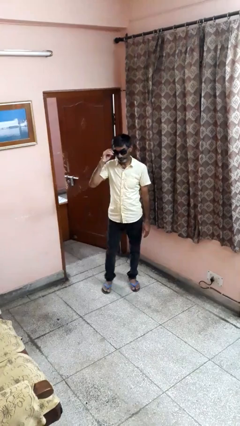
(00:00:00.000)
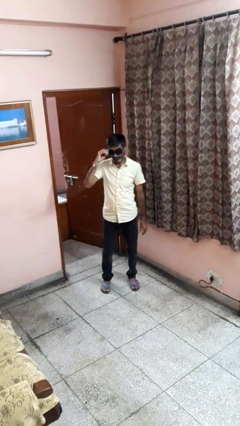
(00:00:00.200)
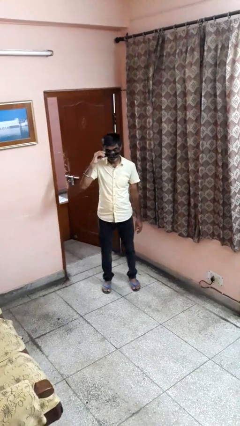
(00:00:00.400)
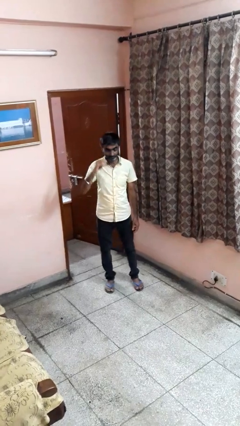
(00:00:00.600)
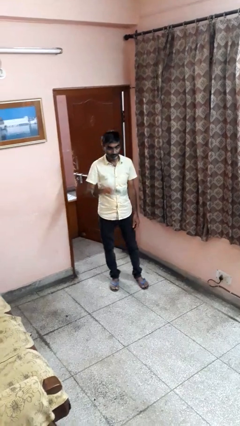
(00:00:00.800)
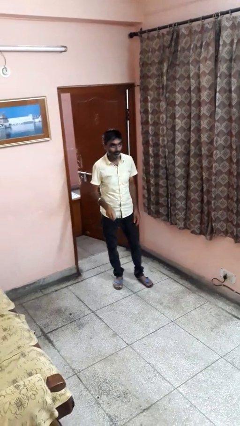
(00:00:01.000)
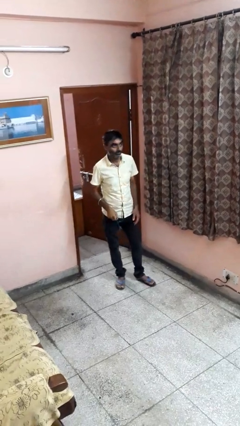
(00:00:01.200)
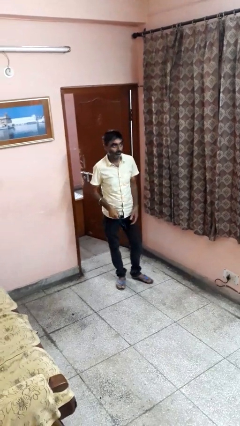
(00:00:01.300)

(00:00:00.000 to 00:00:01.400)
person takes off sunglasses

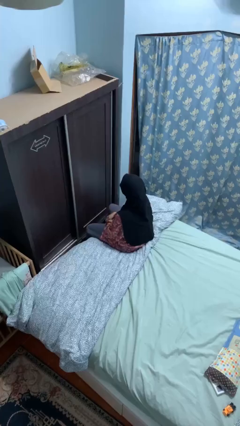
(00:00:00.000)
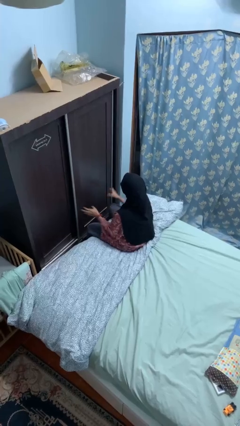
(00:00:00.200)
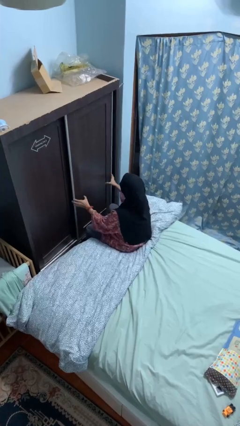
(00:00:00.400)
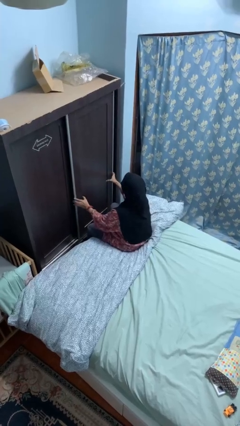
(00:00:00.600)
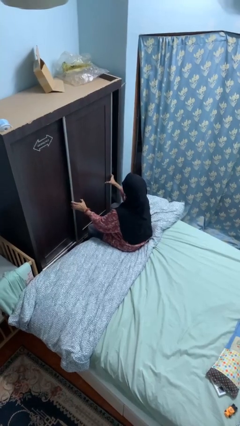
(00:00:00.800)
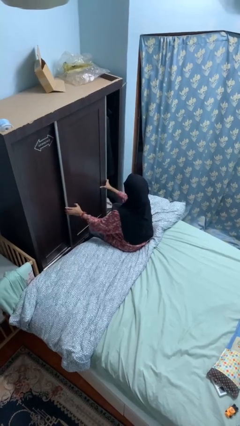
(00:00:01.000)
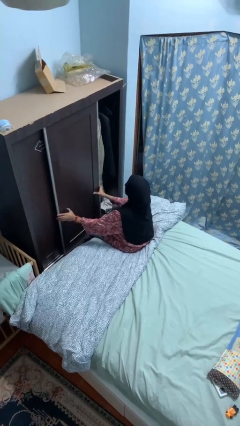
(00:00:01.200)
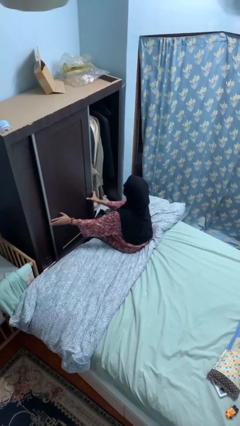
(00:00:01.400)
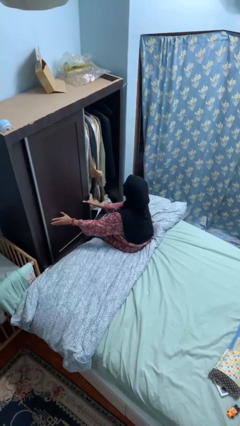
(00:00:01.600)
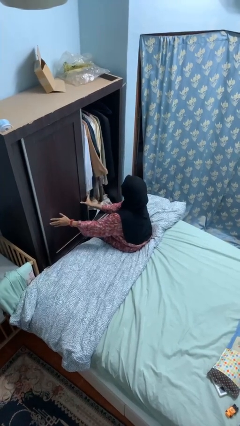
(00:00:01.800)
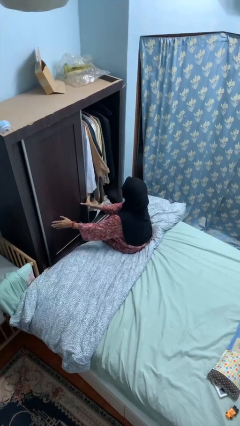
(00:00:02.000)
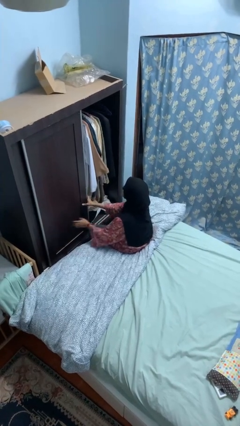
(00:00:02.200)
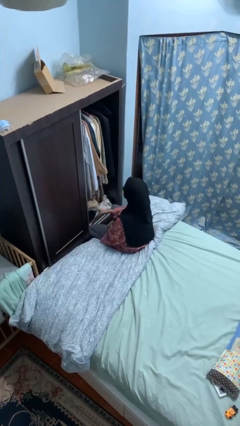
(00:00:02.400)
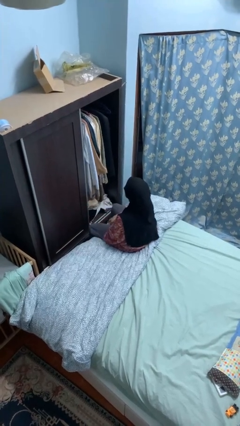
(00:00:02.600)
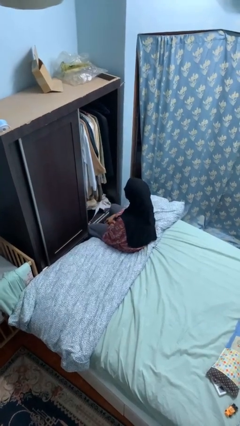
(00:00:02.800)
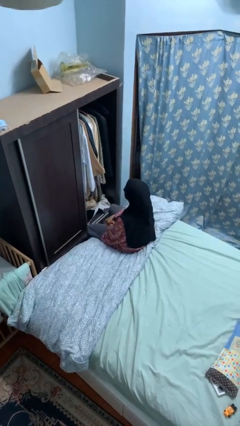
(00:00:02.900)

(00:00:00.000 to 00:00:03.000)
person opens closet door

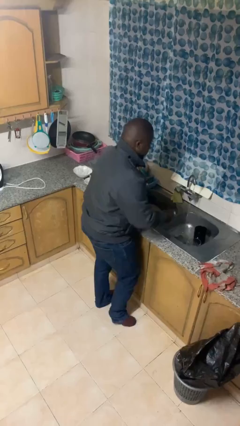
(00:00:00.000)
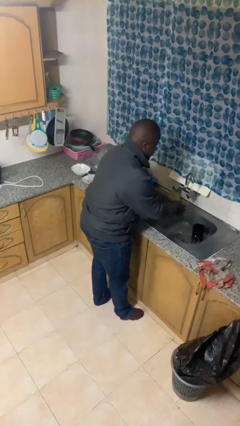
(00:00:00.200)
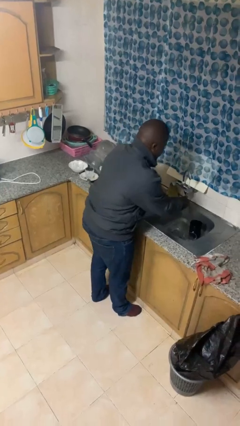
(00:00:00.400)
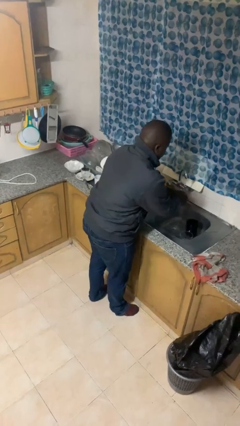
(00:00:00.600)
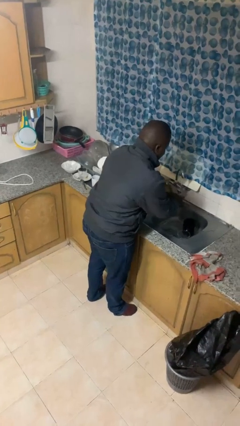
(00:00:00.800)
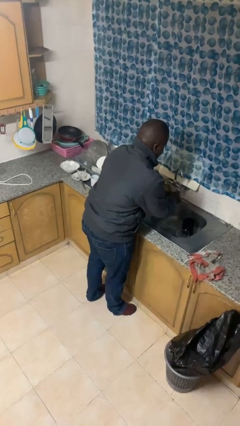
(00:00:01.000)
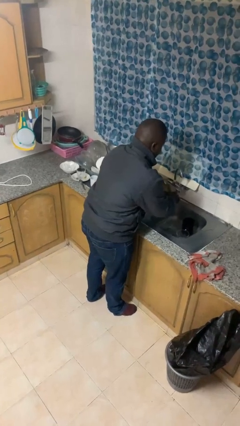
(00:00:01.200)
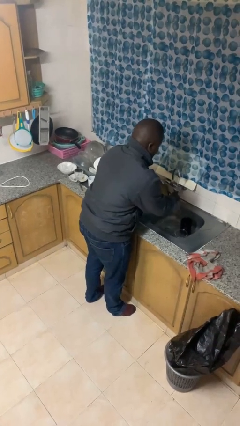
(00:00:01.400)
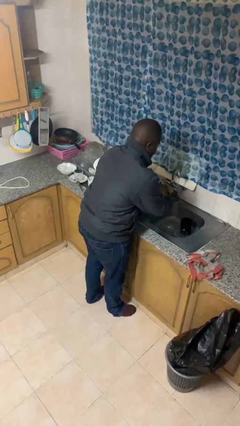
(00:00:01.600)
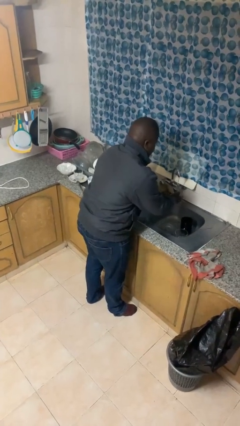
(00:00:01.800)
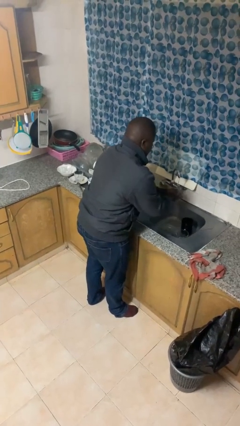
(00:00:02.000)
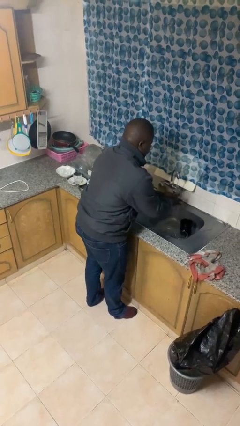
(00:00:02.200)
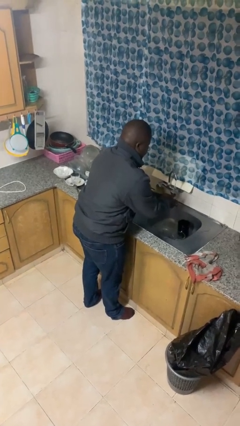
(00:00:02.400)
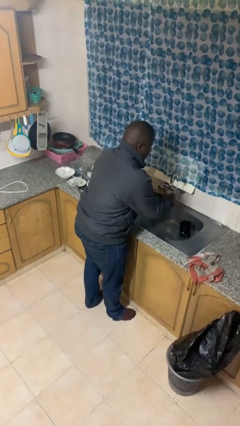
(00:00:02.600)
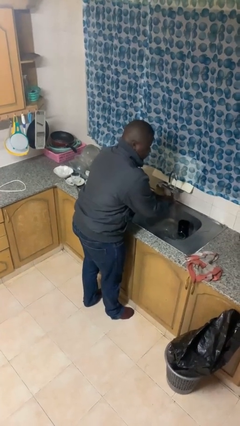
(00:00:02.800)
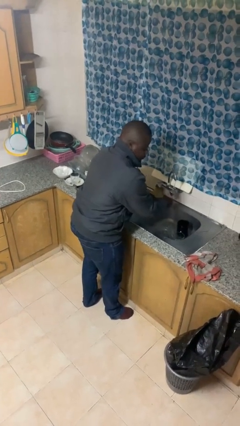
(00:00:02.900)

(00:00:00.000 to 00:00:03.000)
person washes hands

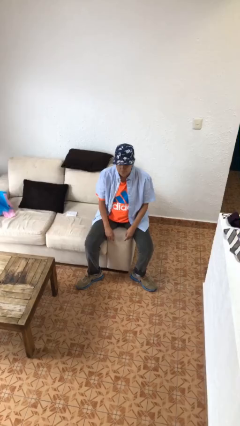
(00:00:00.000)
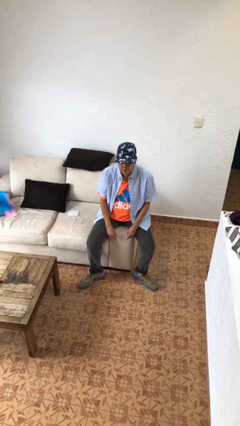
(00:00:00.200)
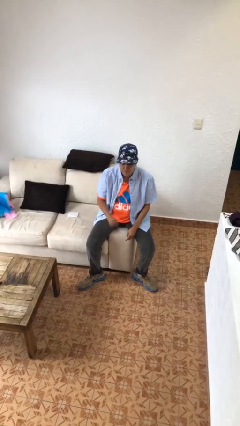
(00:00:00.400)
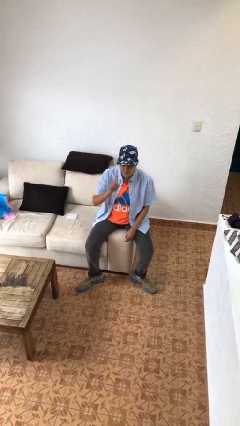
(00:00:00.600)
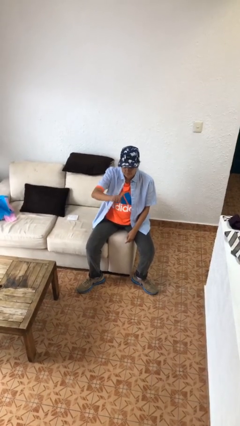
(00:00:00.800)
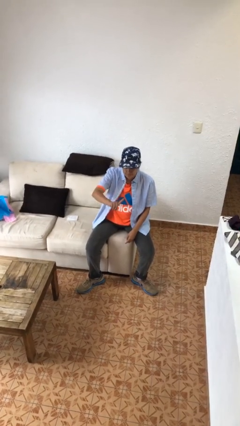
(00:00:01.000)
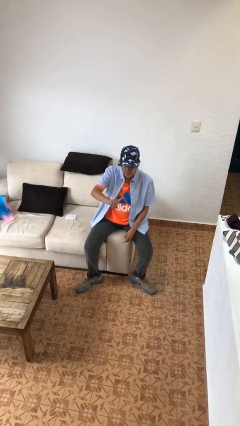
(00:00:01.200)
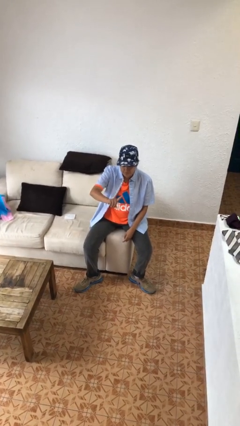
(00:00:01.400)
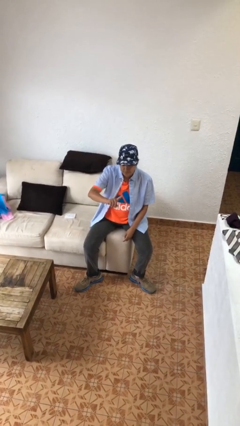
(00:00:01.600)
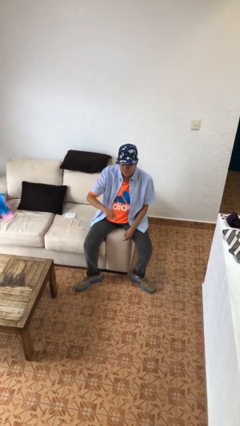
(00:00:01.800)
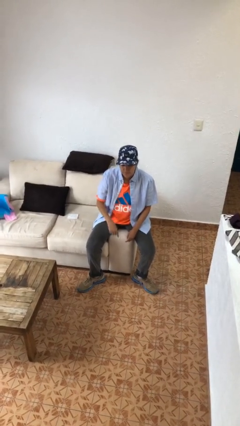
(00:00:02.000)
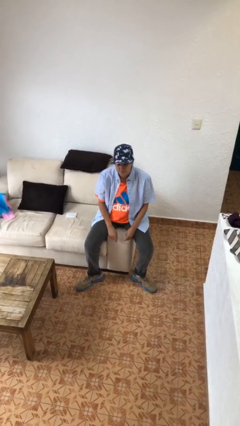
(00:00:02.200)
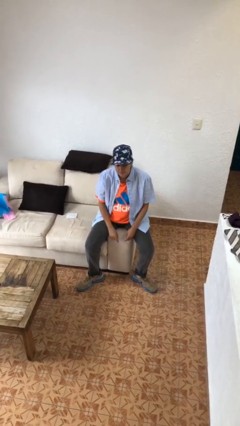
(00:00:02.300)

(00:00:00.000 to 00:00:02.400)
person gestures number one

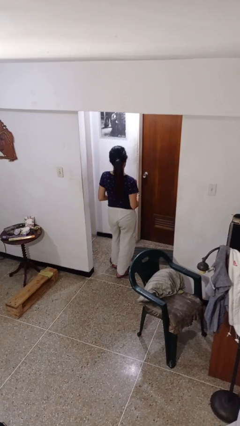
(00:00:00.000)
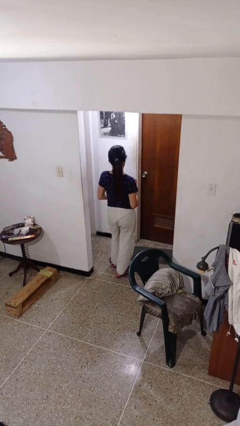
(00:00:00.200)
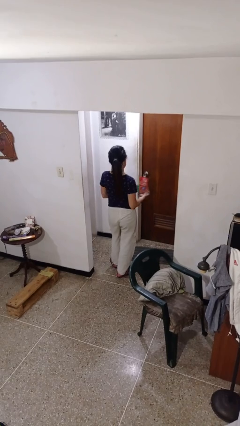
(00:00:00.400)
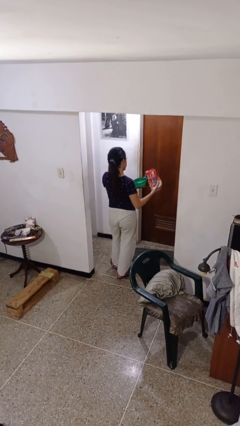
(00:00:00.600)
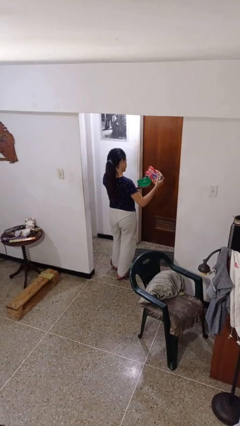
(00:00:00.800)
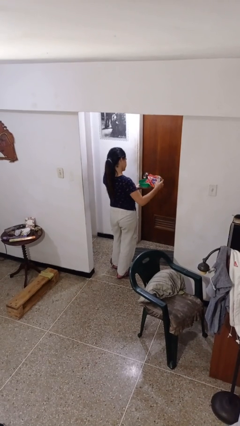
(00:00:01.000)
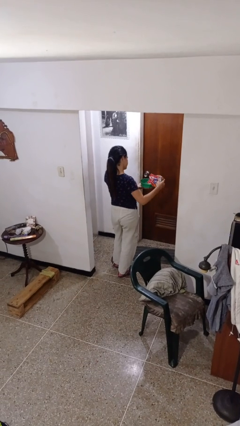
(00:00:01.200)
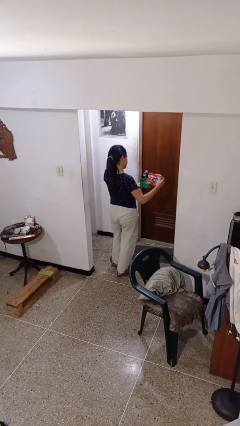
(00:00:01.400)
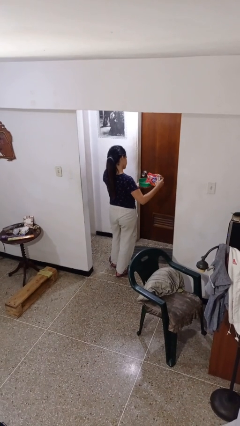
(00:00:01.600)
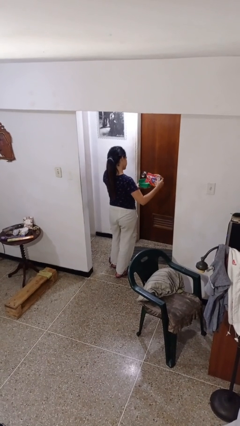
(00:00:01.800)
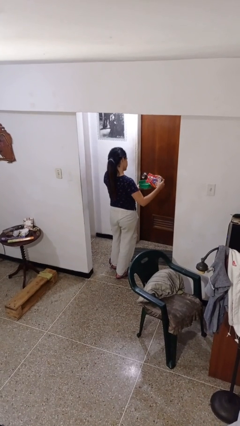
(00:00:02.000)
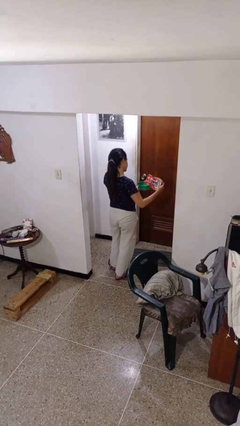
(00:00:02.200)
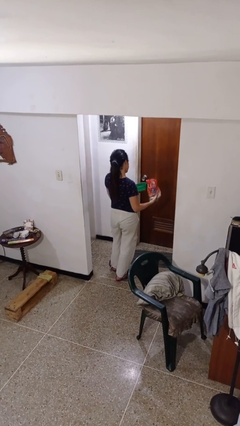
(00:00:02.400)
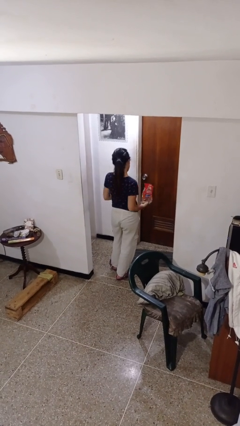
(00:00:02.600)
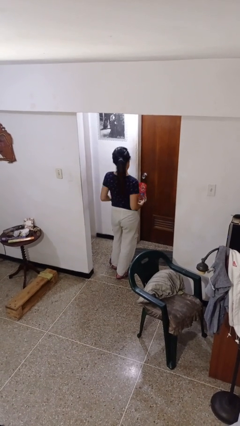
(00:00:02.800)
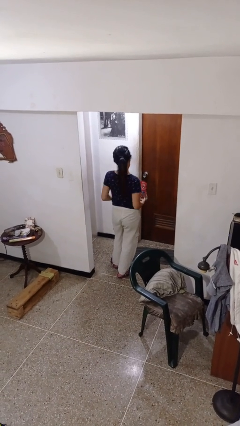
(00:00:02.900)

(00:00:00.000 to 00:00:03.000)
person pours into bowl

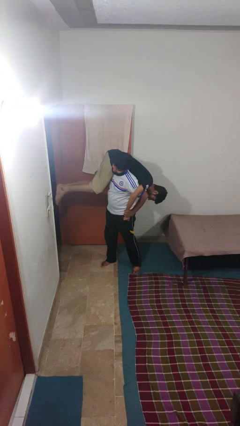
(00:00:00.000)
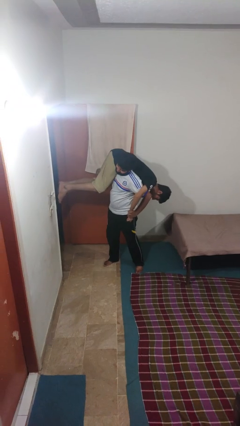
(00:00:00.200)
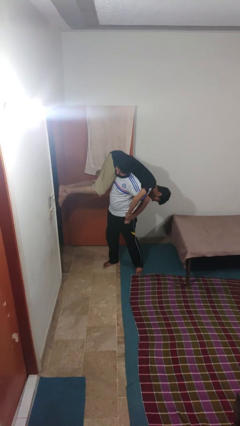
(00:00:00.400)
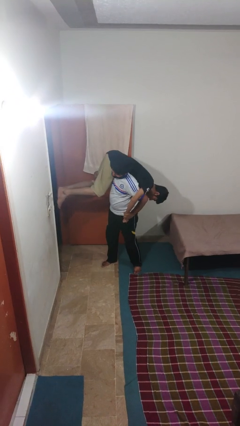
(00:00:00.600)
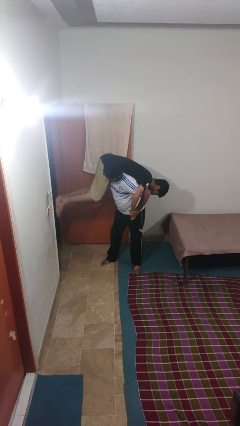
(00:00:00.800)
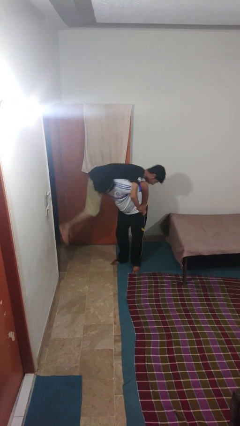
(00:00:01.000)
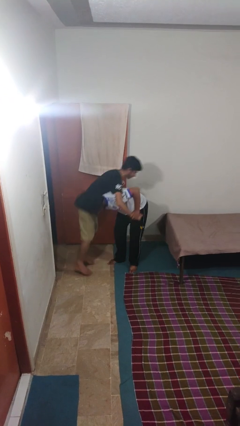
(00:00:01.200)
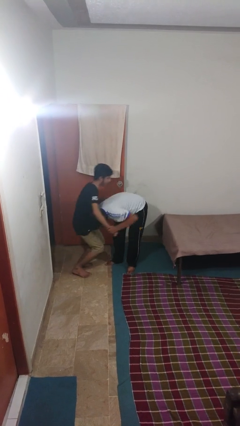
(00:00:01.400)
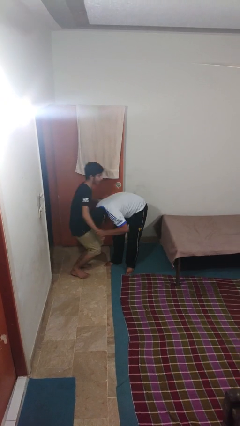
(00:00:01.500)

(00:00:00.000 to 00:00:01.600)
person puts down person

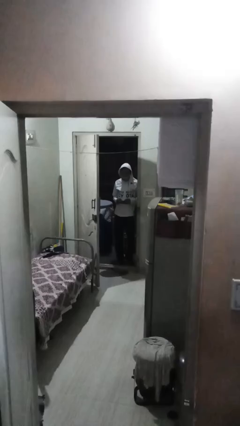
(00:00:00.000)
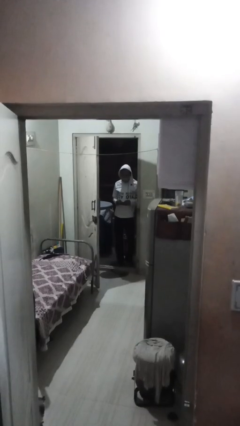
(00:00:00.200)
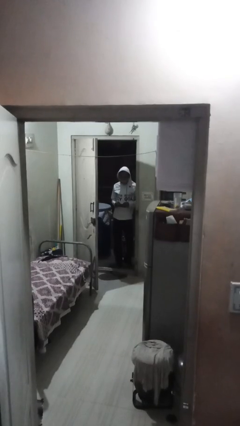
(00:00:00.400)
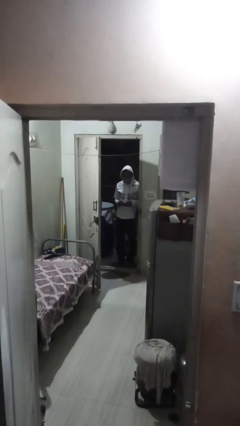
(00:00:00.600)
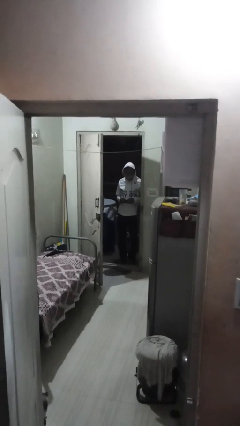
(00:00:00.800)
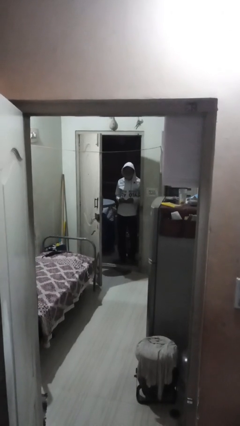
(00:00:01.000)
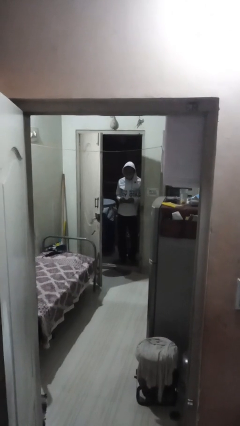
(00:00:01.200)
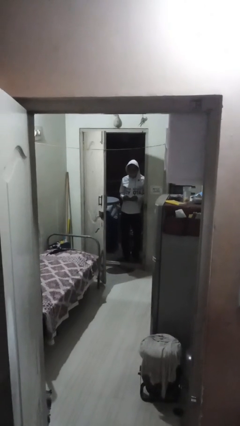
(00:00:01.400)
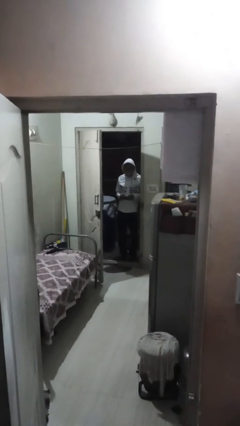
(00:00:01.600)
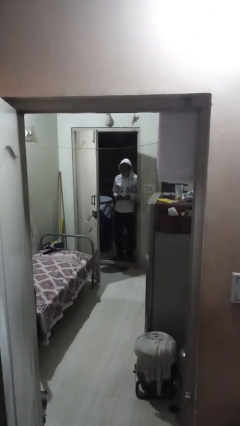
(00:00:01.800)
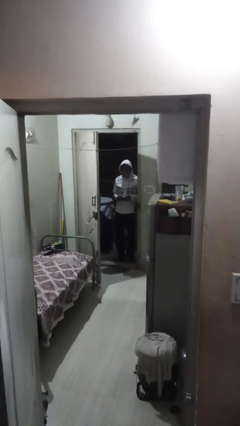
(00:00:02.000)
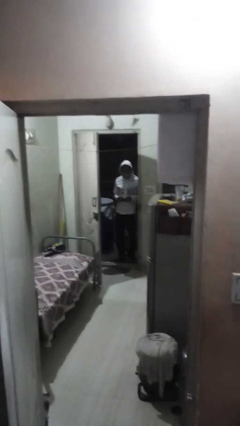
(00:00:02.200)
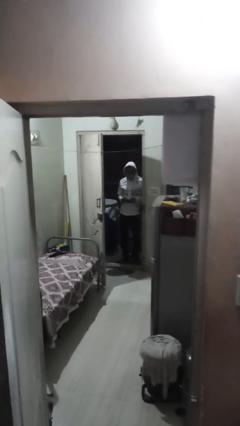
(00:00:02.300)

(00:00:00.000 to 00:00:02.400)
person enters scene through structure

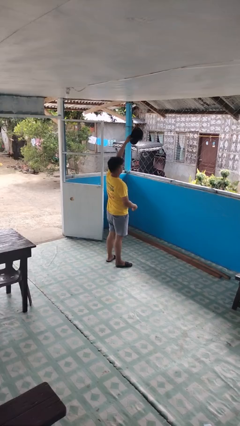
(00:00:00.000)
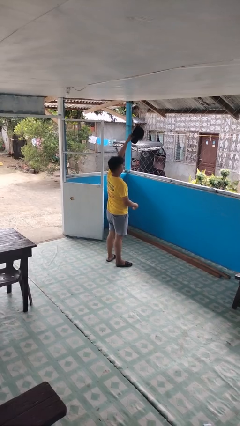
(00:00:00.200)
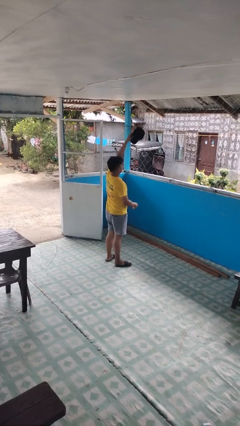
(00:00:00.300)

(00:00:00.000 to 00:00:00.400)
person drops object
